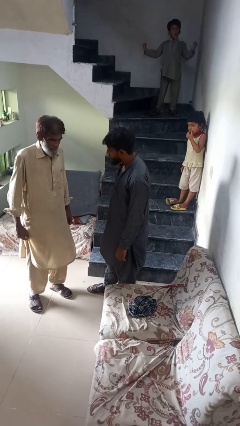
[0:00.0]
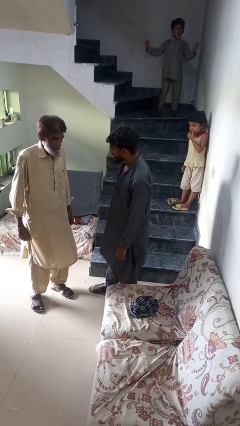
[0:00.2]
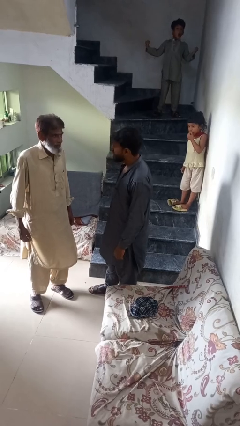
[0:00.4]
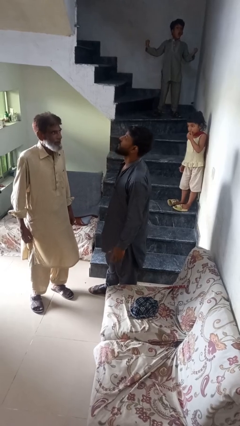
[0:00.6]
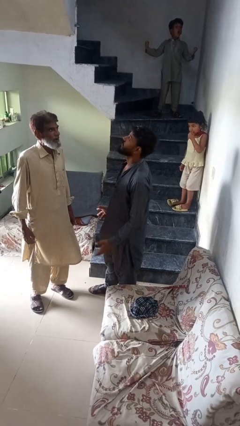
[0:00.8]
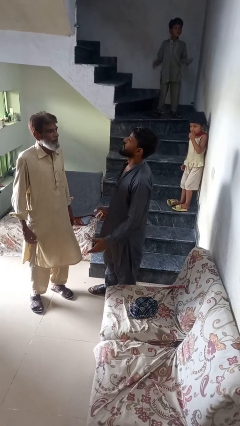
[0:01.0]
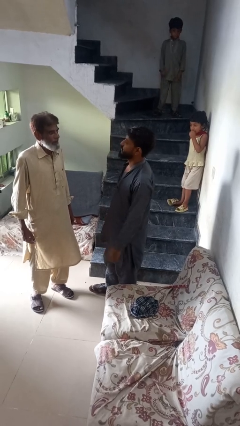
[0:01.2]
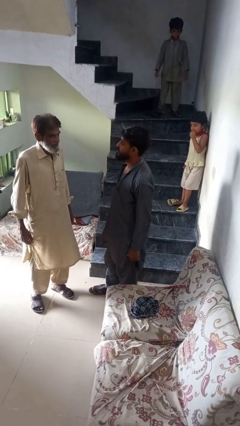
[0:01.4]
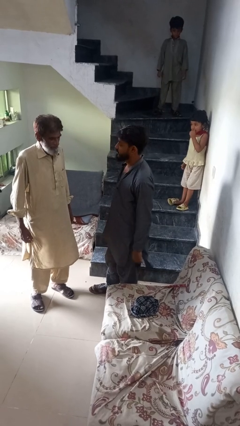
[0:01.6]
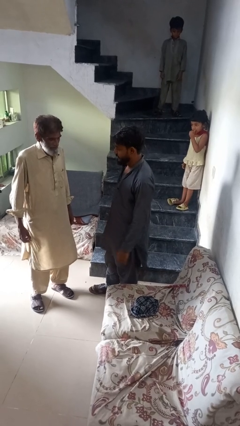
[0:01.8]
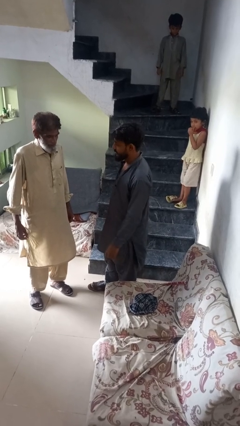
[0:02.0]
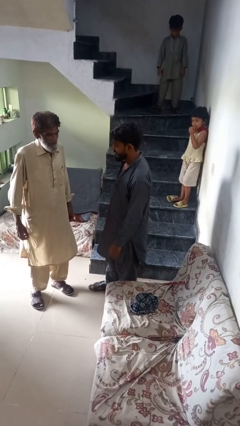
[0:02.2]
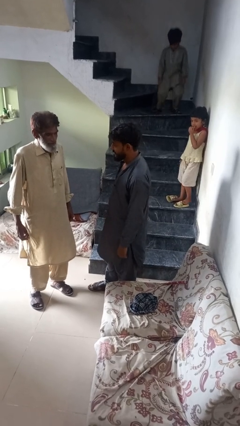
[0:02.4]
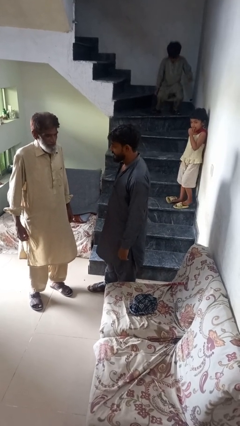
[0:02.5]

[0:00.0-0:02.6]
person laughs with person

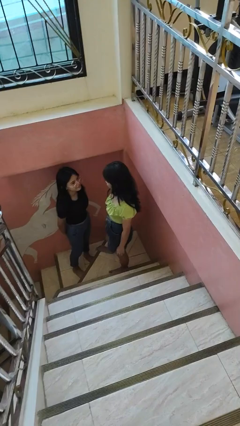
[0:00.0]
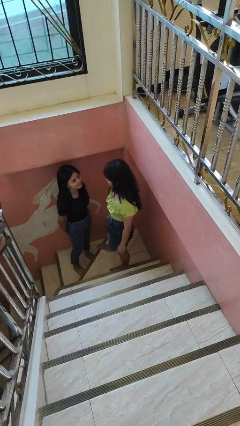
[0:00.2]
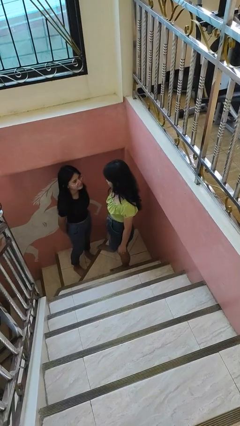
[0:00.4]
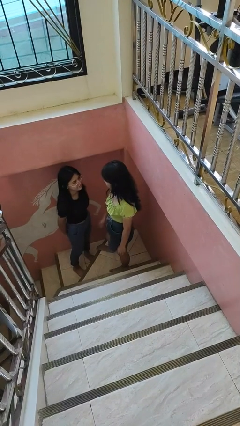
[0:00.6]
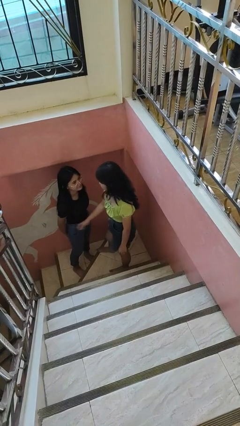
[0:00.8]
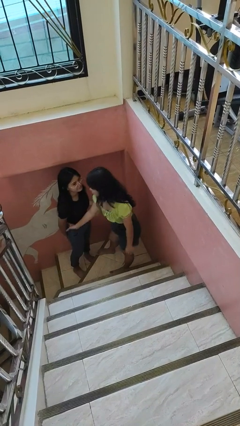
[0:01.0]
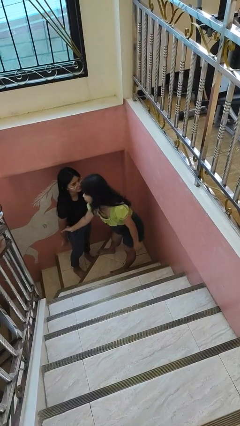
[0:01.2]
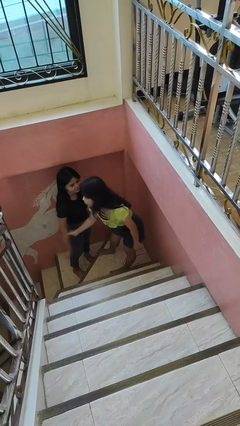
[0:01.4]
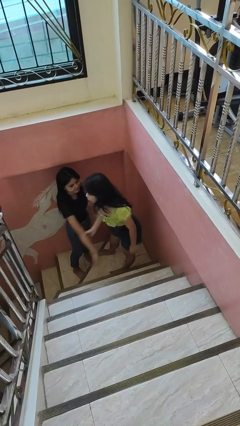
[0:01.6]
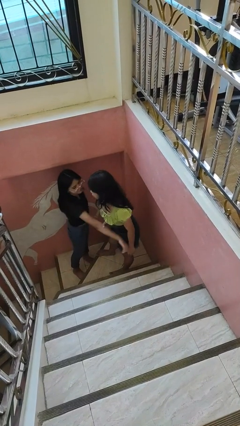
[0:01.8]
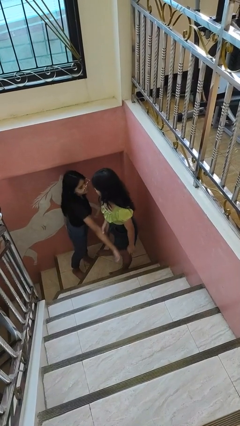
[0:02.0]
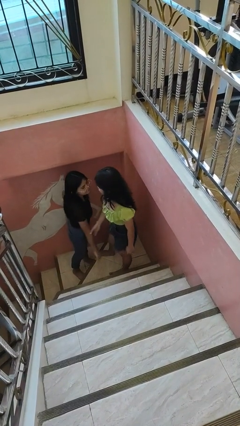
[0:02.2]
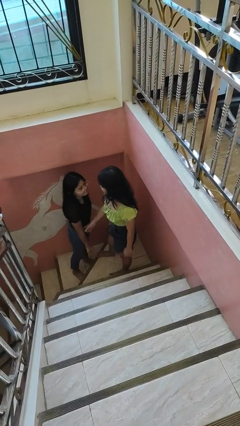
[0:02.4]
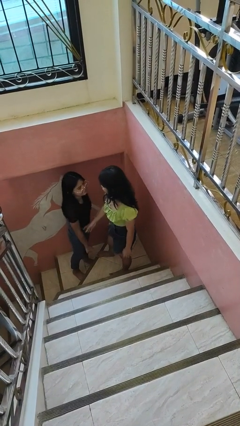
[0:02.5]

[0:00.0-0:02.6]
person grabs person by forearm

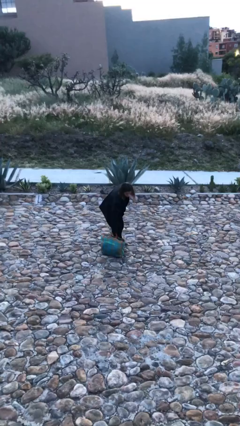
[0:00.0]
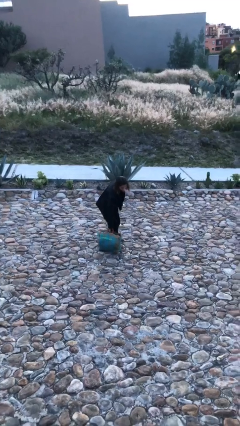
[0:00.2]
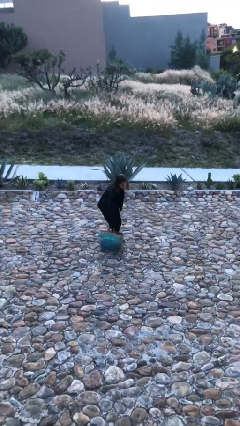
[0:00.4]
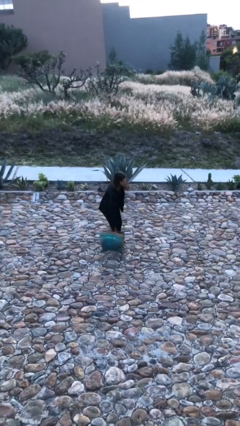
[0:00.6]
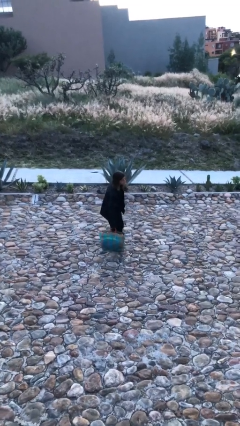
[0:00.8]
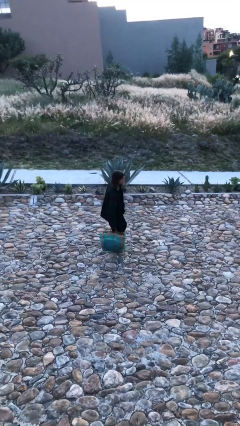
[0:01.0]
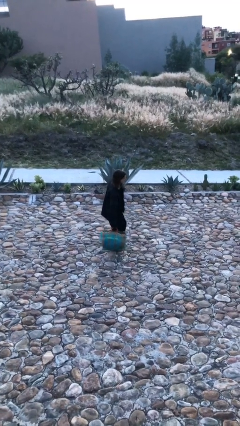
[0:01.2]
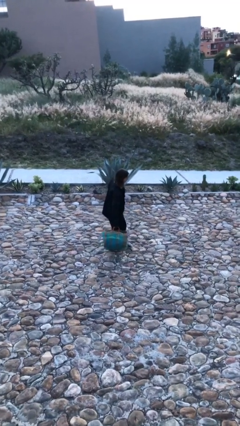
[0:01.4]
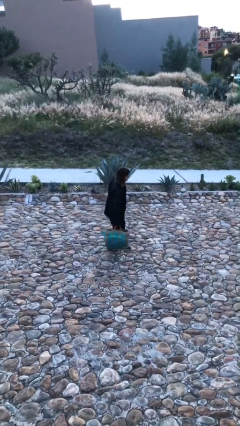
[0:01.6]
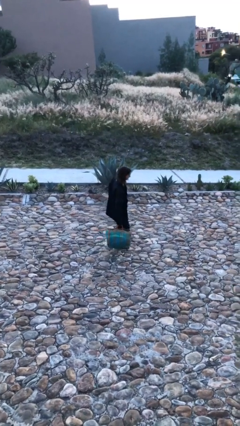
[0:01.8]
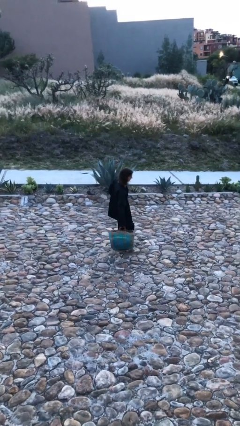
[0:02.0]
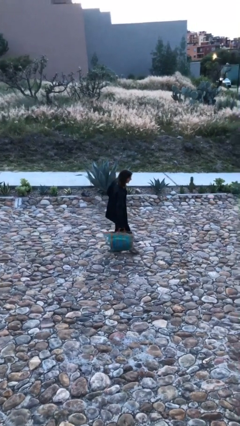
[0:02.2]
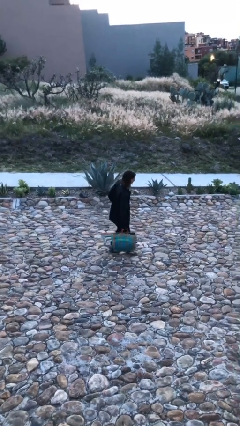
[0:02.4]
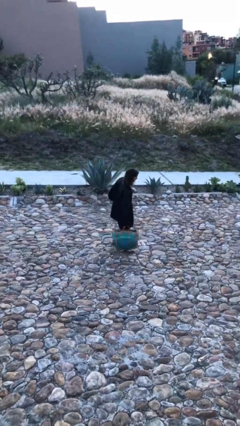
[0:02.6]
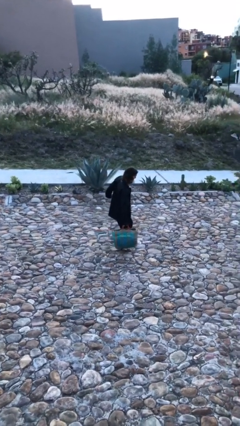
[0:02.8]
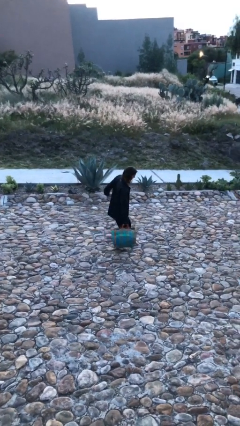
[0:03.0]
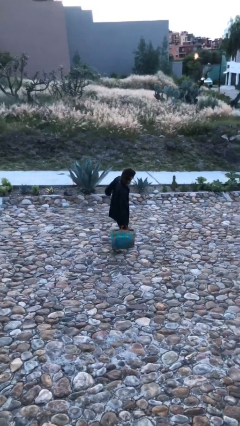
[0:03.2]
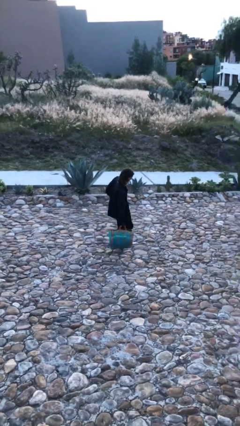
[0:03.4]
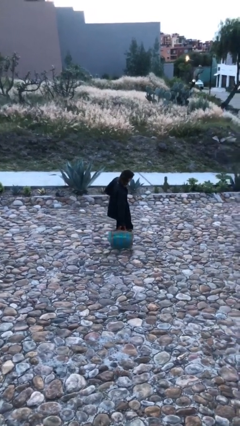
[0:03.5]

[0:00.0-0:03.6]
person carries heavy object

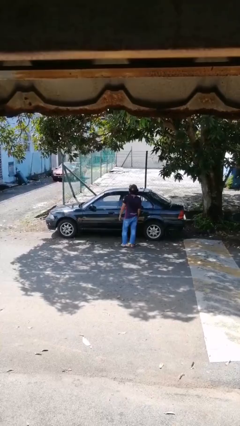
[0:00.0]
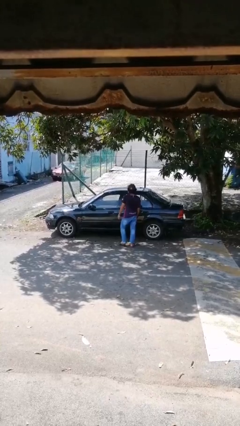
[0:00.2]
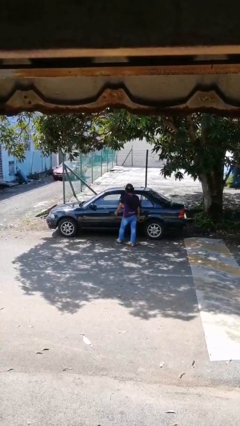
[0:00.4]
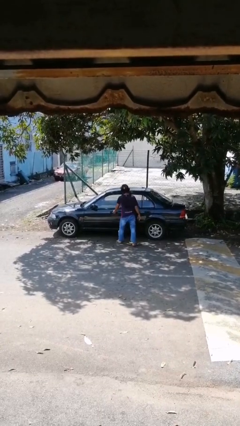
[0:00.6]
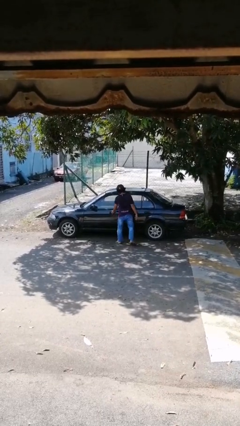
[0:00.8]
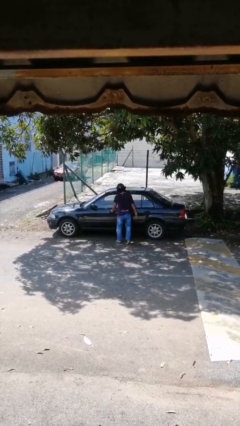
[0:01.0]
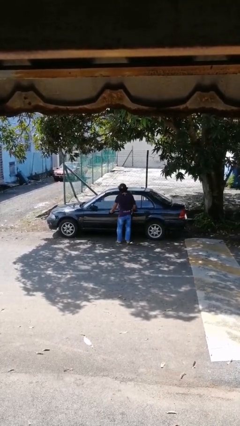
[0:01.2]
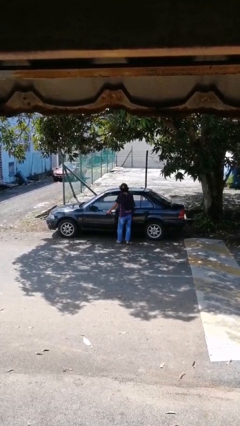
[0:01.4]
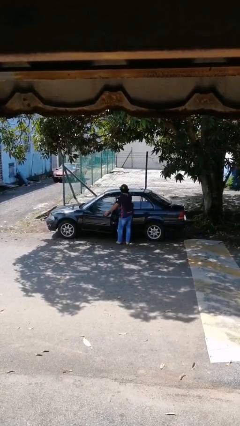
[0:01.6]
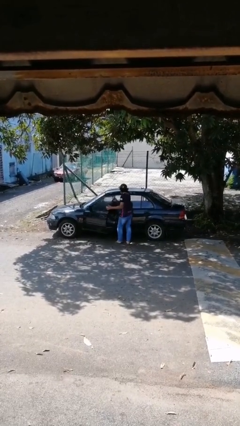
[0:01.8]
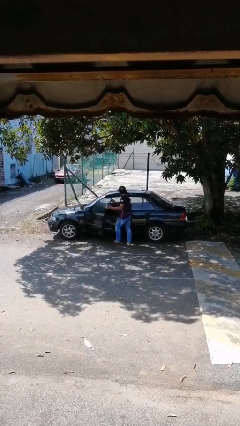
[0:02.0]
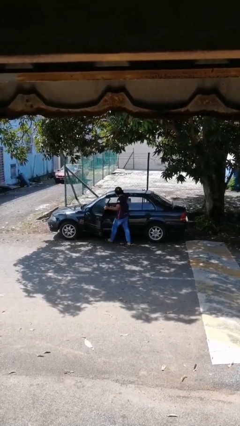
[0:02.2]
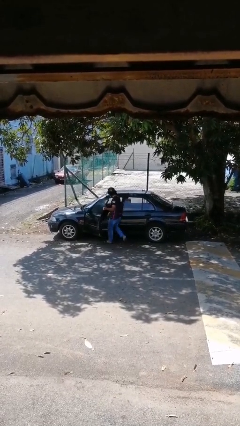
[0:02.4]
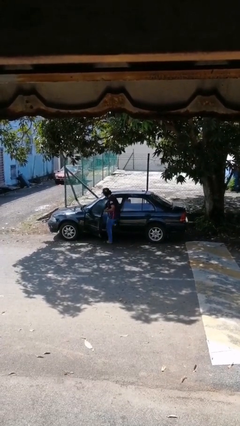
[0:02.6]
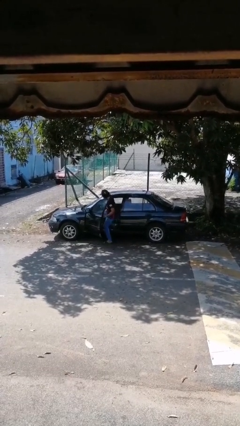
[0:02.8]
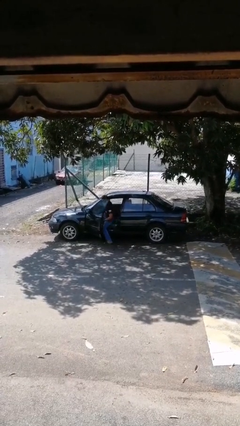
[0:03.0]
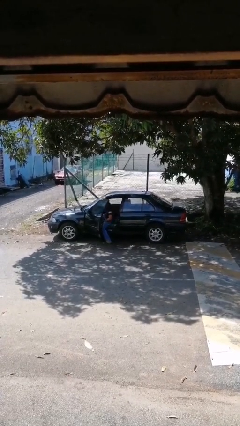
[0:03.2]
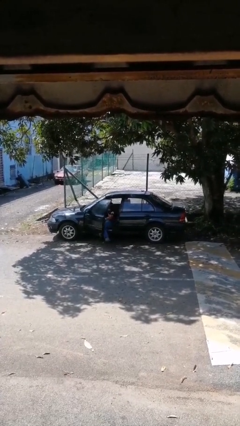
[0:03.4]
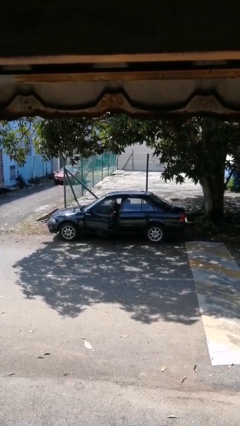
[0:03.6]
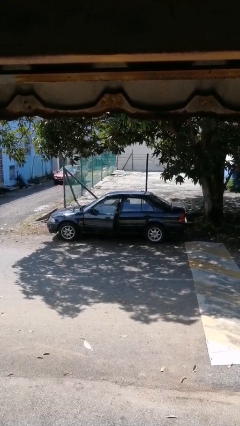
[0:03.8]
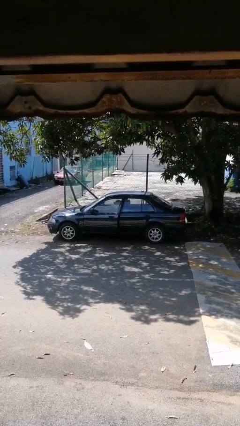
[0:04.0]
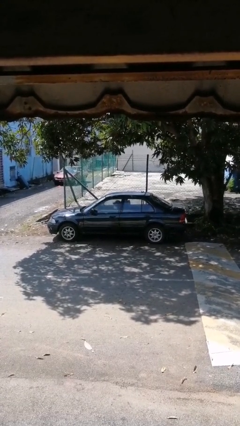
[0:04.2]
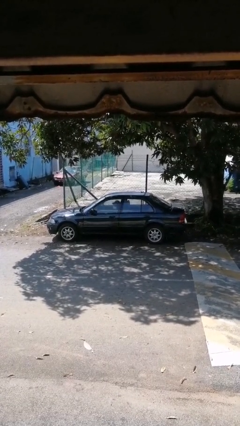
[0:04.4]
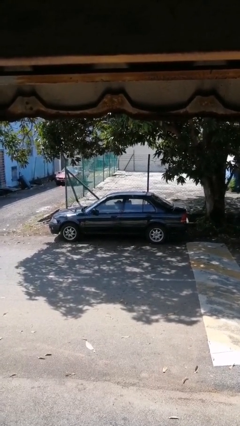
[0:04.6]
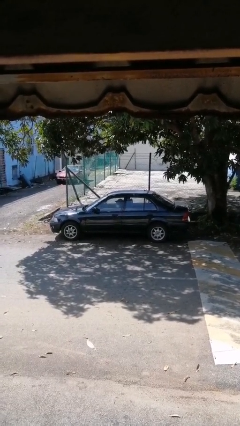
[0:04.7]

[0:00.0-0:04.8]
car picks up person

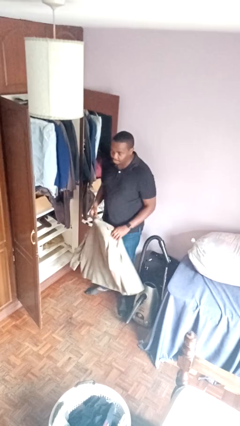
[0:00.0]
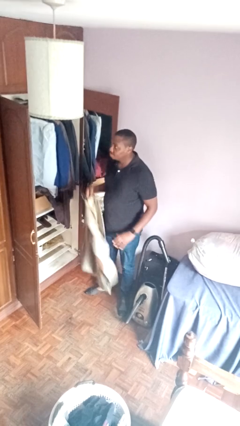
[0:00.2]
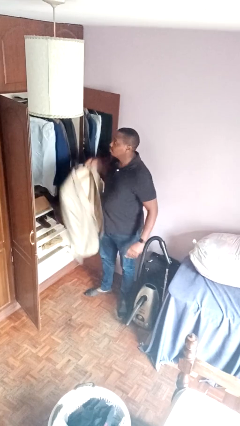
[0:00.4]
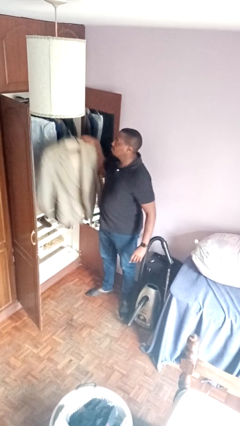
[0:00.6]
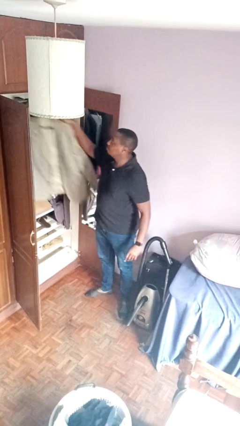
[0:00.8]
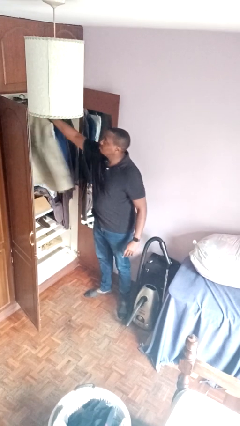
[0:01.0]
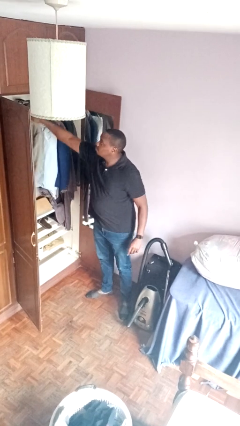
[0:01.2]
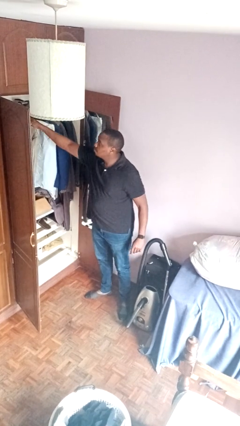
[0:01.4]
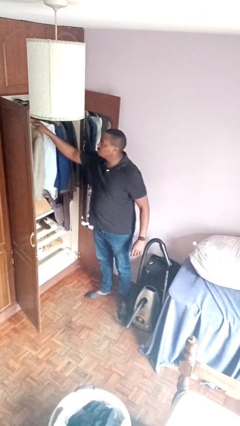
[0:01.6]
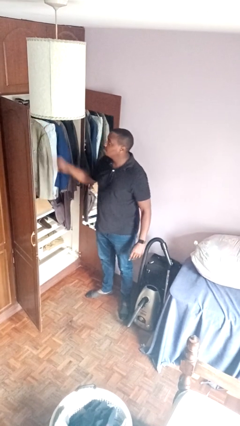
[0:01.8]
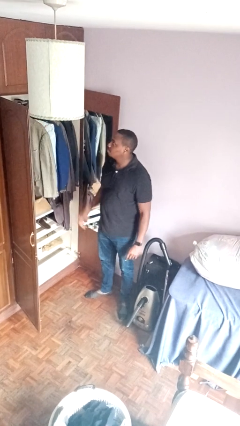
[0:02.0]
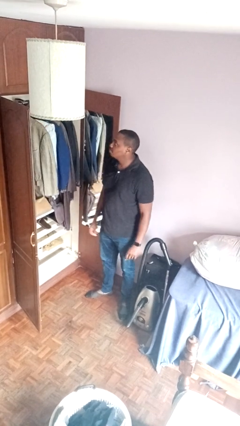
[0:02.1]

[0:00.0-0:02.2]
person puts clothes into closet

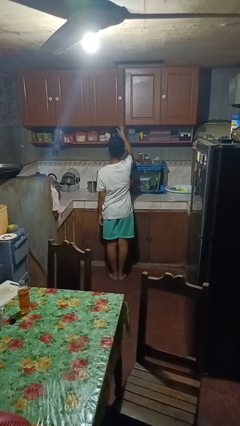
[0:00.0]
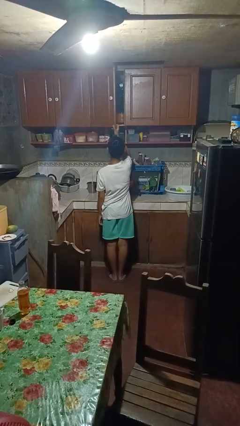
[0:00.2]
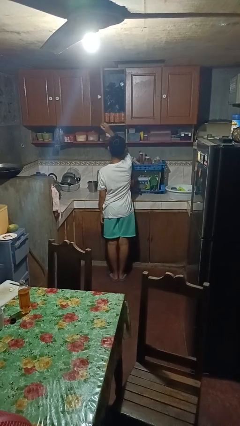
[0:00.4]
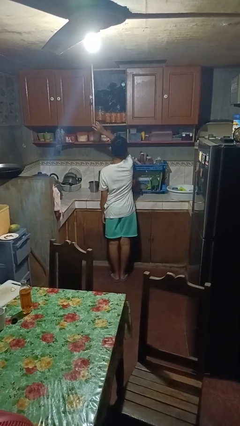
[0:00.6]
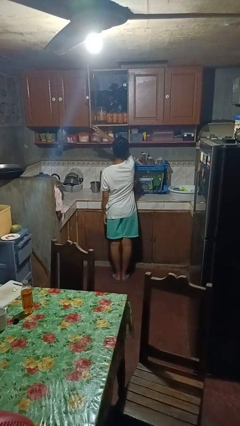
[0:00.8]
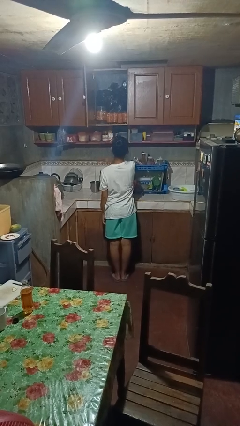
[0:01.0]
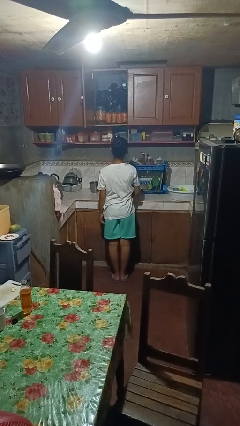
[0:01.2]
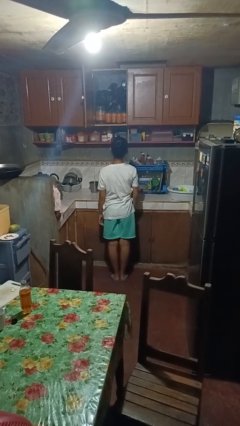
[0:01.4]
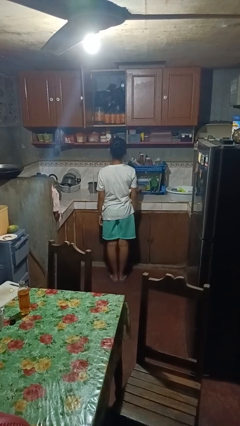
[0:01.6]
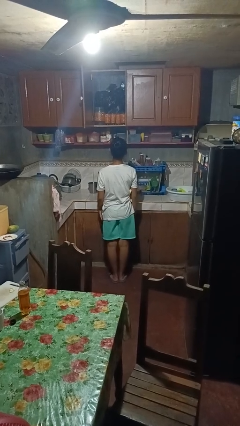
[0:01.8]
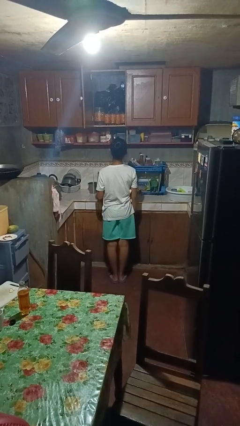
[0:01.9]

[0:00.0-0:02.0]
person opens cabinet
